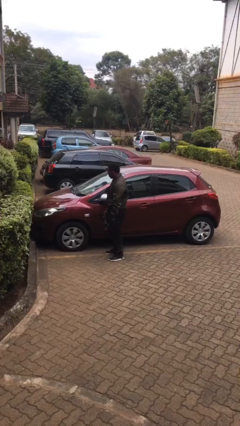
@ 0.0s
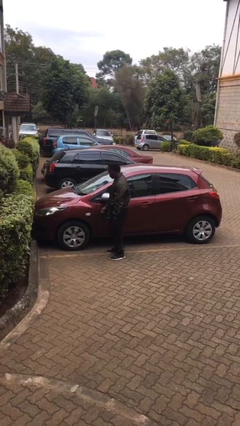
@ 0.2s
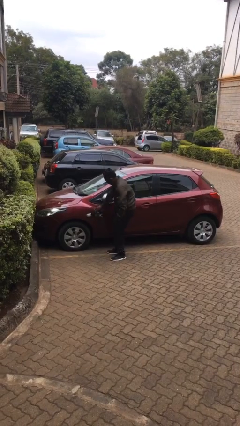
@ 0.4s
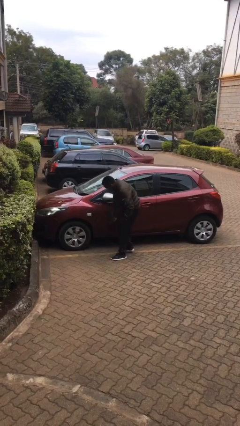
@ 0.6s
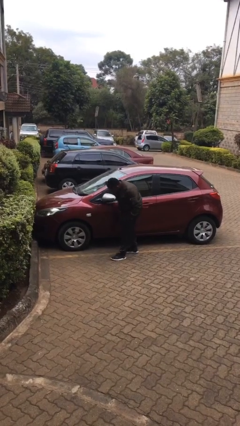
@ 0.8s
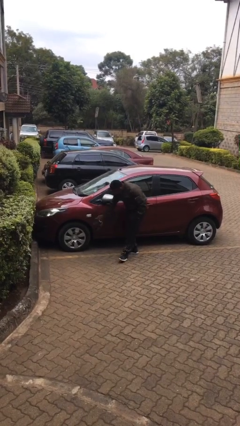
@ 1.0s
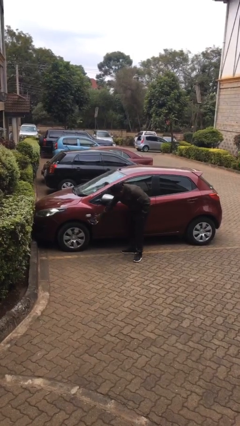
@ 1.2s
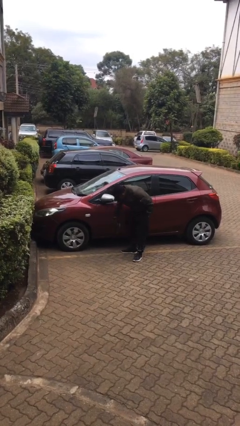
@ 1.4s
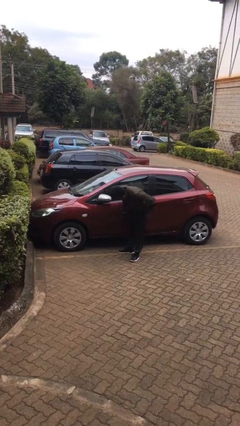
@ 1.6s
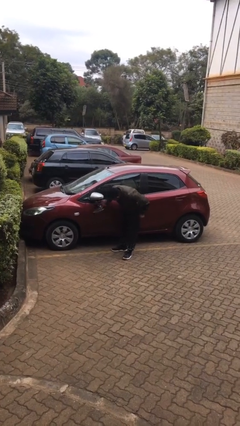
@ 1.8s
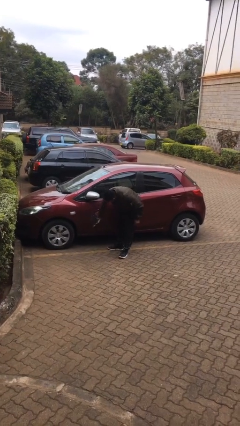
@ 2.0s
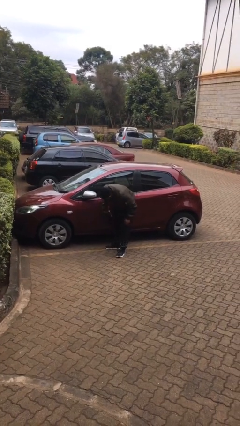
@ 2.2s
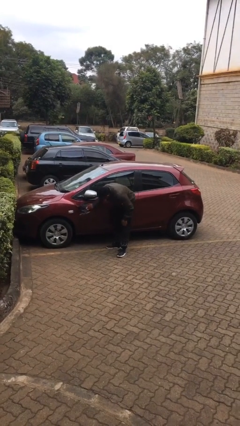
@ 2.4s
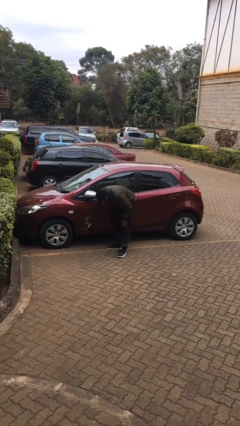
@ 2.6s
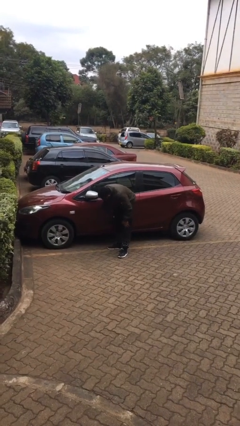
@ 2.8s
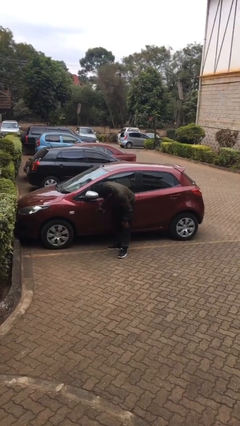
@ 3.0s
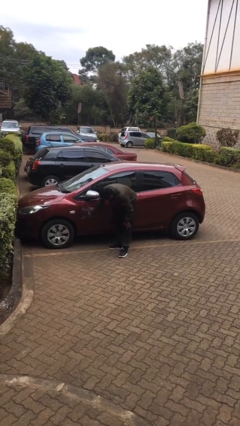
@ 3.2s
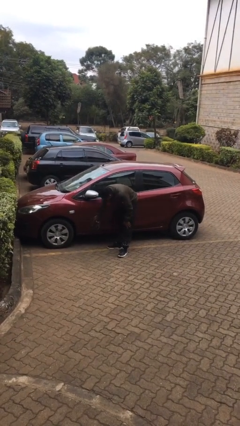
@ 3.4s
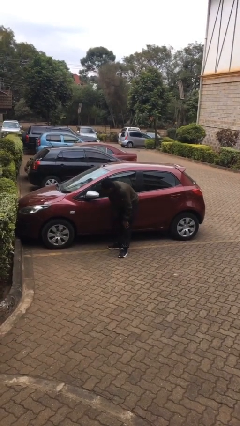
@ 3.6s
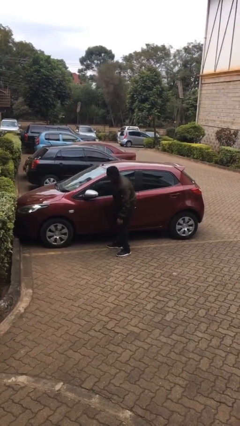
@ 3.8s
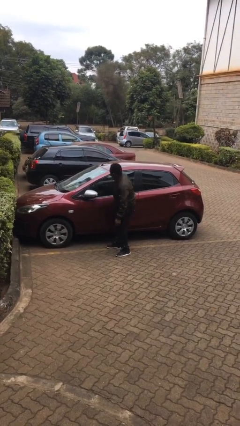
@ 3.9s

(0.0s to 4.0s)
person polishes car with rag

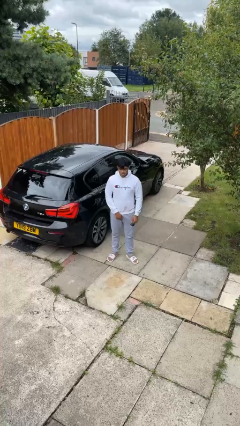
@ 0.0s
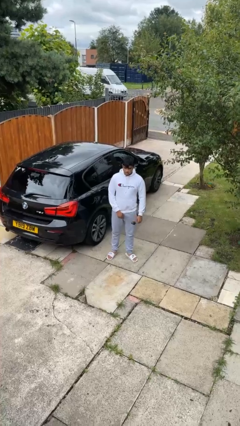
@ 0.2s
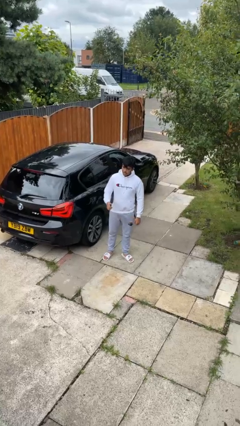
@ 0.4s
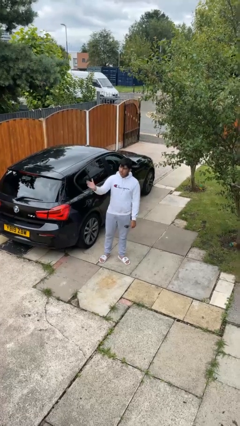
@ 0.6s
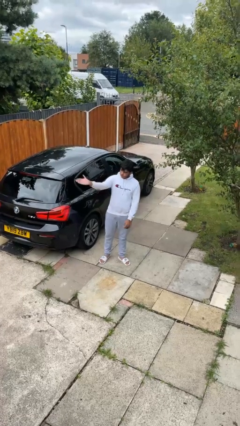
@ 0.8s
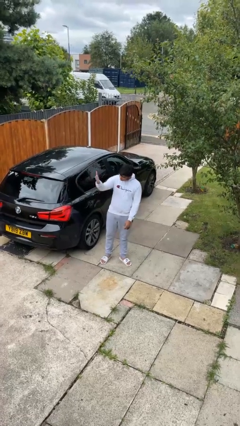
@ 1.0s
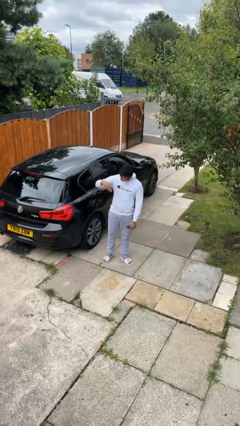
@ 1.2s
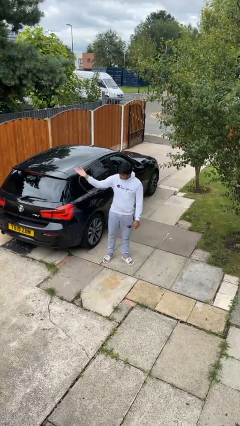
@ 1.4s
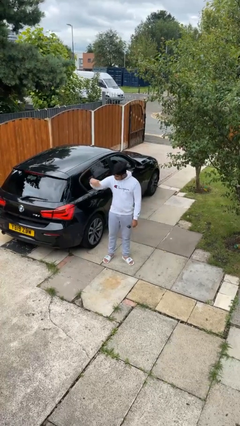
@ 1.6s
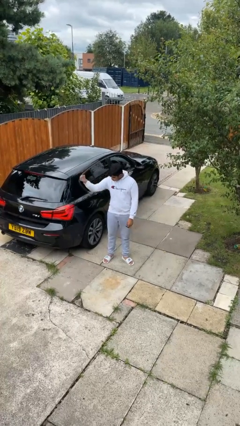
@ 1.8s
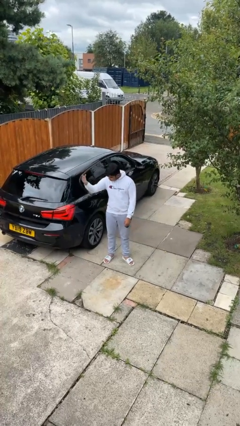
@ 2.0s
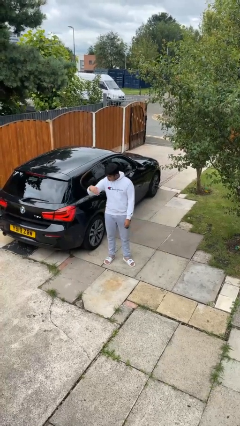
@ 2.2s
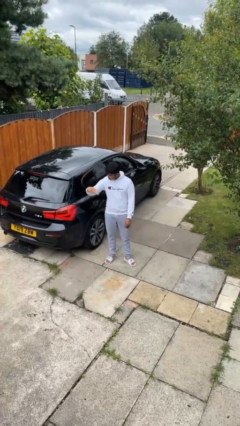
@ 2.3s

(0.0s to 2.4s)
person gestures come here

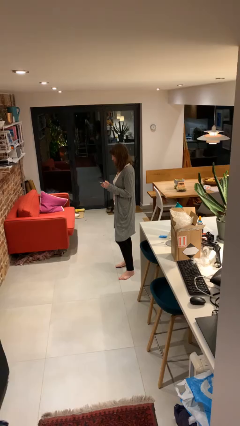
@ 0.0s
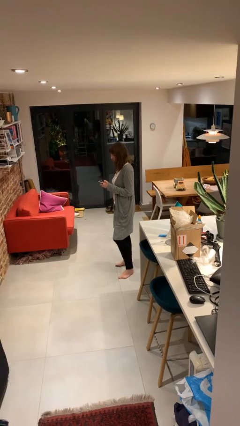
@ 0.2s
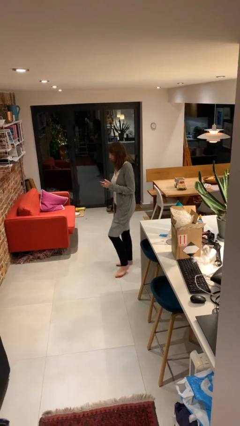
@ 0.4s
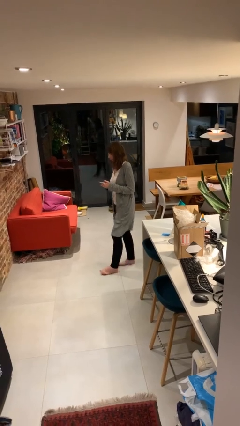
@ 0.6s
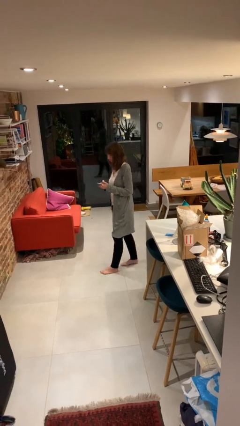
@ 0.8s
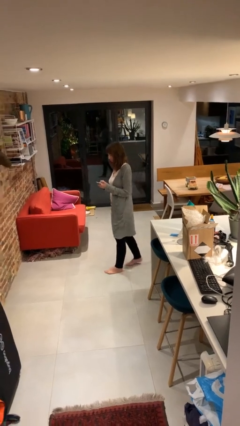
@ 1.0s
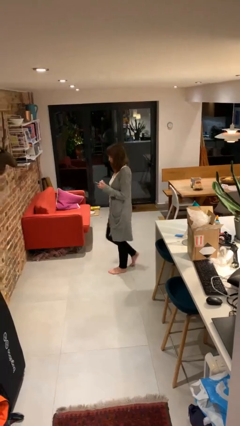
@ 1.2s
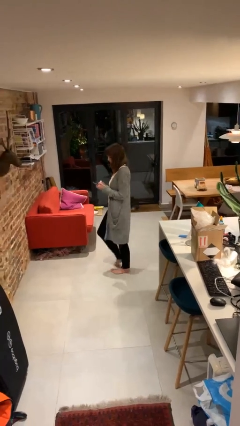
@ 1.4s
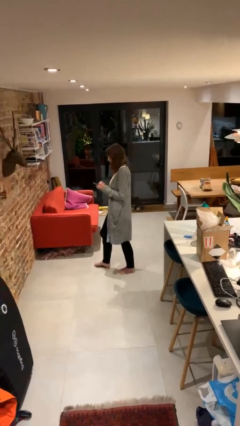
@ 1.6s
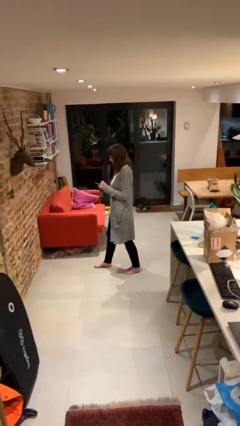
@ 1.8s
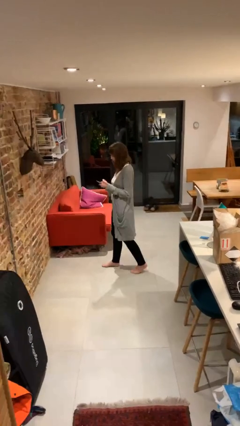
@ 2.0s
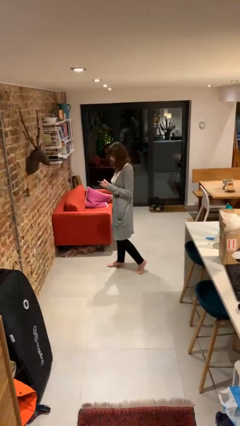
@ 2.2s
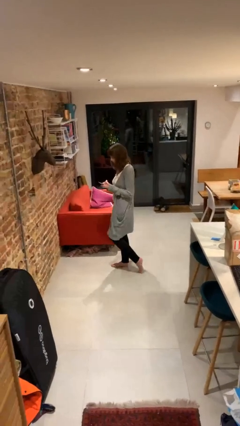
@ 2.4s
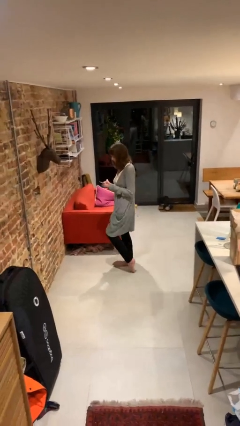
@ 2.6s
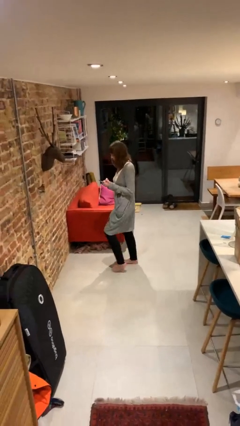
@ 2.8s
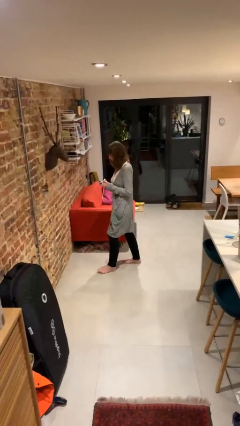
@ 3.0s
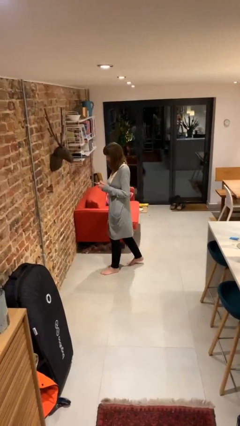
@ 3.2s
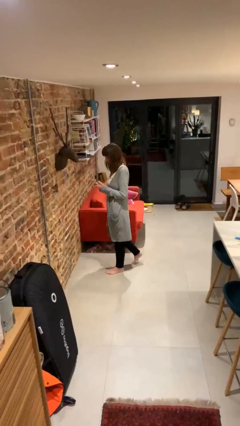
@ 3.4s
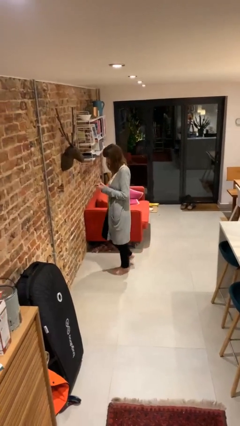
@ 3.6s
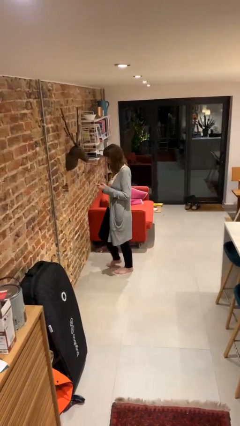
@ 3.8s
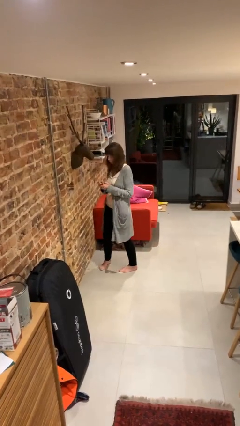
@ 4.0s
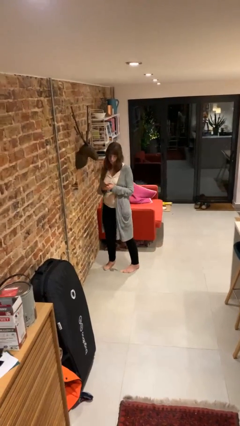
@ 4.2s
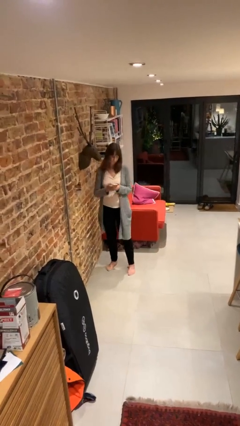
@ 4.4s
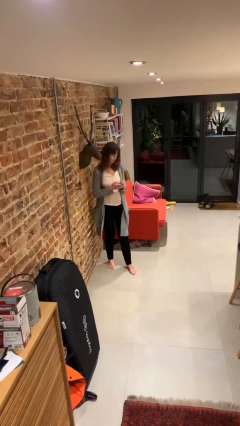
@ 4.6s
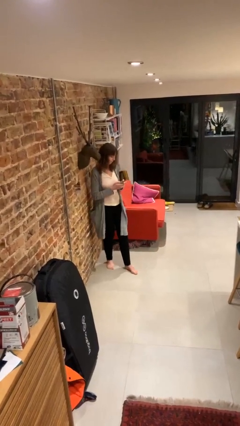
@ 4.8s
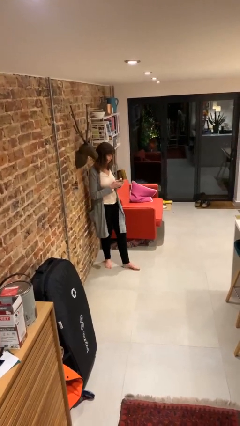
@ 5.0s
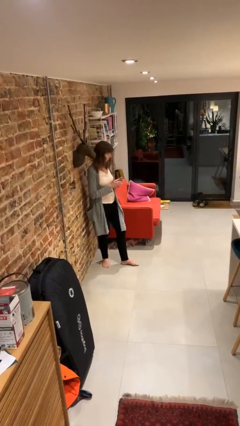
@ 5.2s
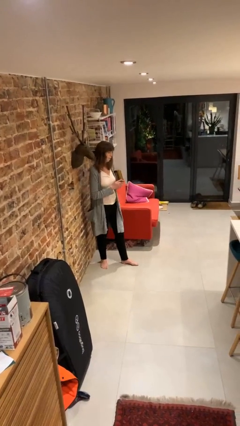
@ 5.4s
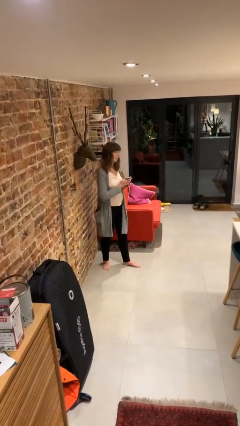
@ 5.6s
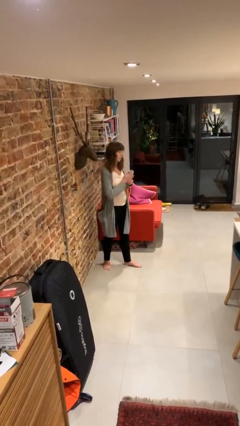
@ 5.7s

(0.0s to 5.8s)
person texts on phone

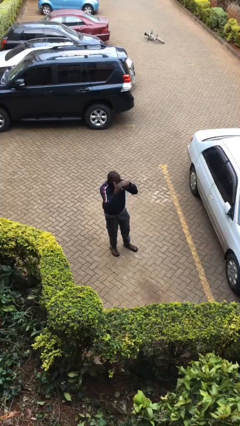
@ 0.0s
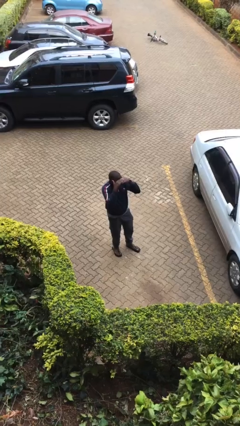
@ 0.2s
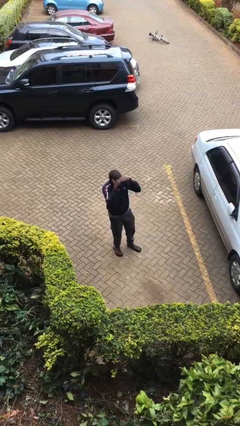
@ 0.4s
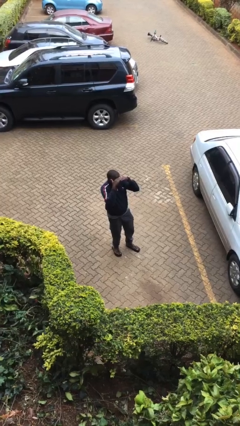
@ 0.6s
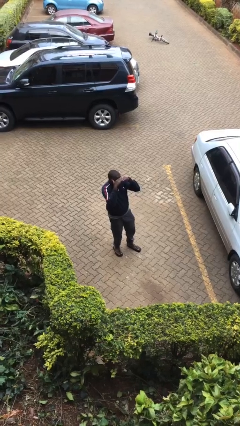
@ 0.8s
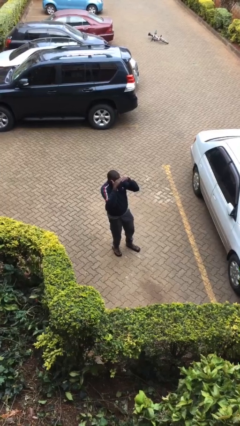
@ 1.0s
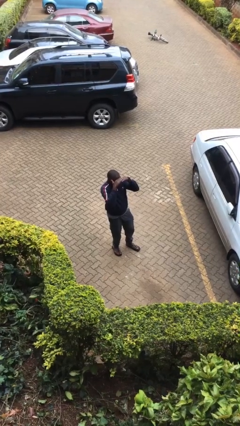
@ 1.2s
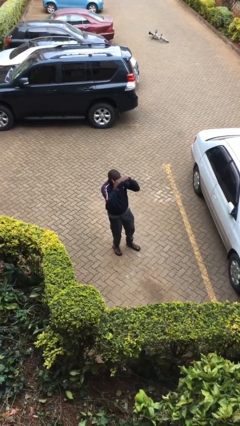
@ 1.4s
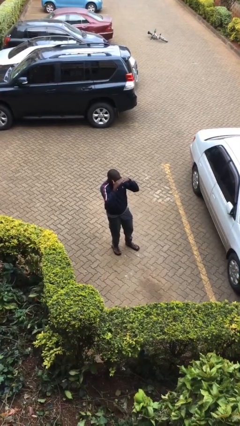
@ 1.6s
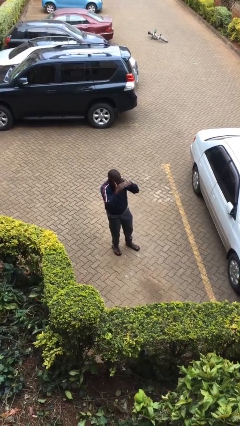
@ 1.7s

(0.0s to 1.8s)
person shades eyes

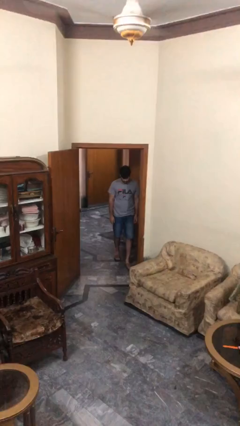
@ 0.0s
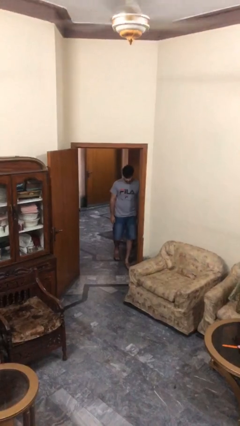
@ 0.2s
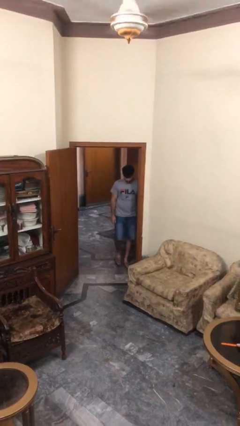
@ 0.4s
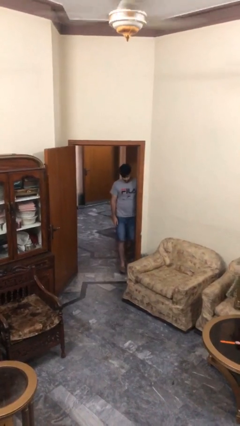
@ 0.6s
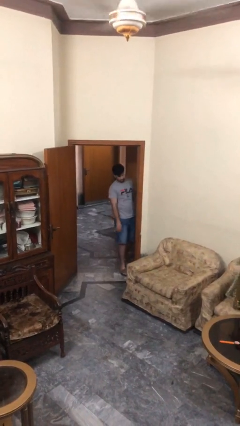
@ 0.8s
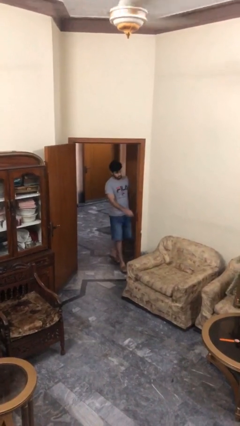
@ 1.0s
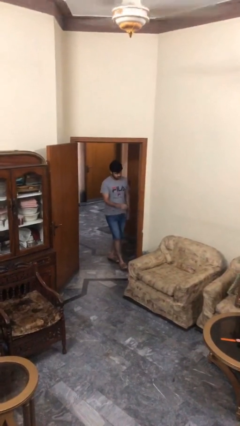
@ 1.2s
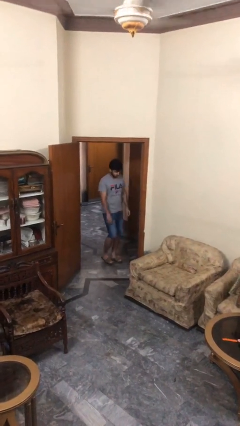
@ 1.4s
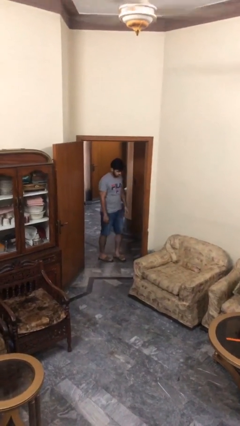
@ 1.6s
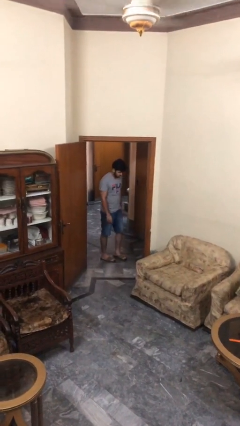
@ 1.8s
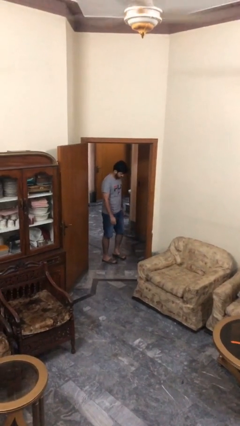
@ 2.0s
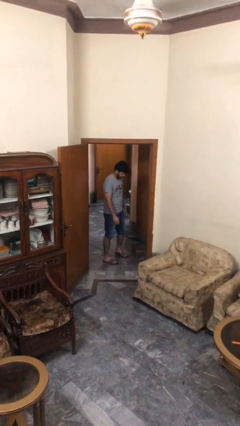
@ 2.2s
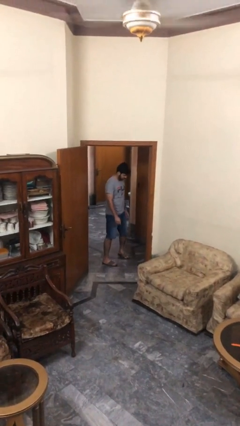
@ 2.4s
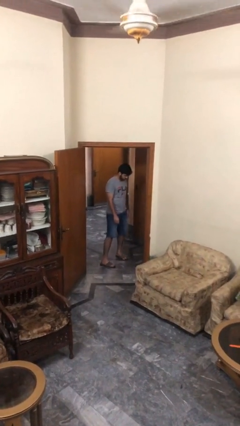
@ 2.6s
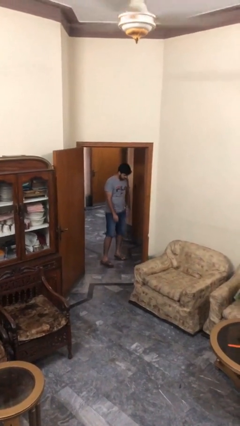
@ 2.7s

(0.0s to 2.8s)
person bumps into wall

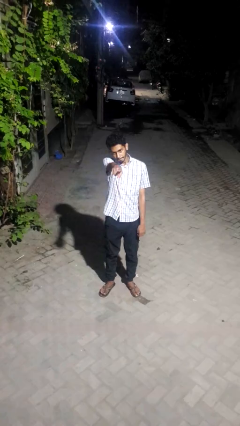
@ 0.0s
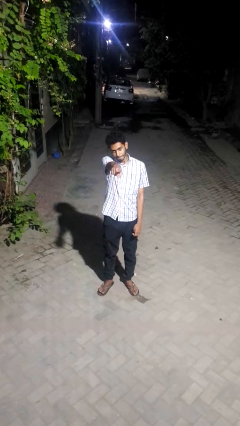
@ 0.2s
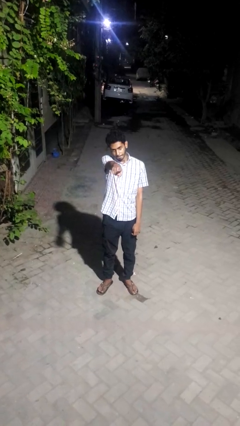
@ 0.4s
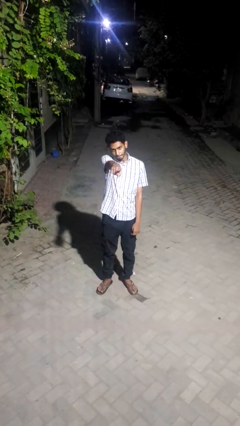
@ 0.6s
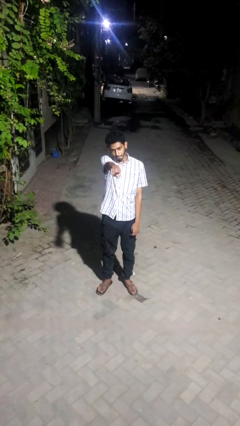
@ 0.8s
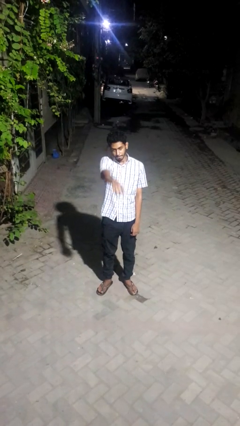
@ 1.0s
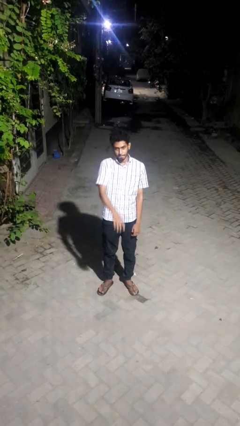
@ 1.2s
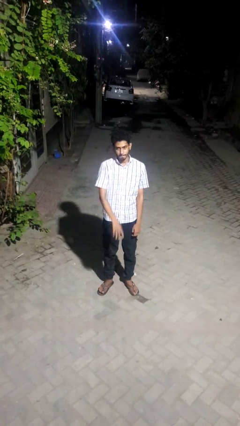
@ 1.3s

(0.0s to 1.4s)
person points at person
